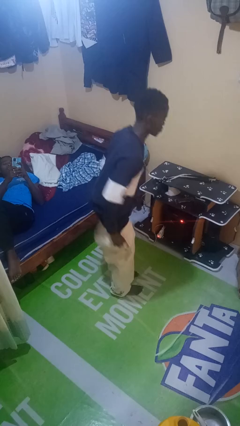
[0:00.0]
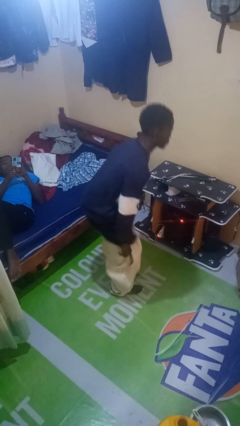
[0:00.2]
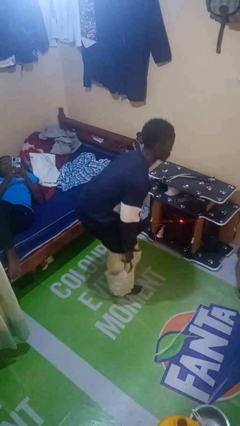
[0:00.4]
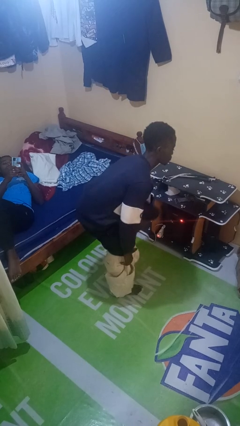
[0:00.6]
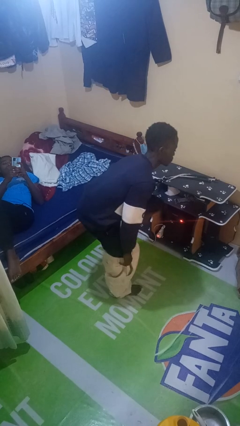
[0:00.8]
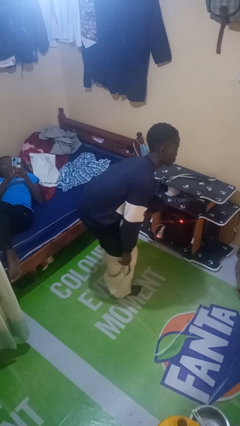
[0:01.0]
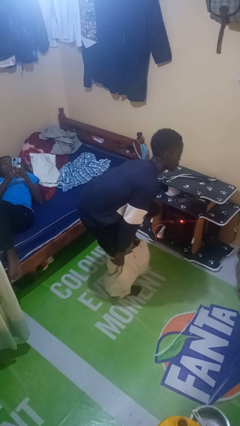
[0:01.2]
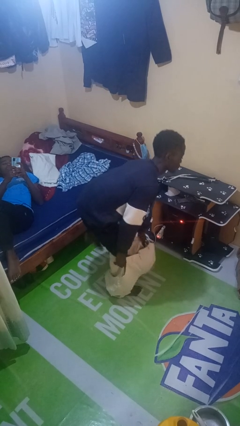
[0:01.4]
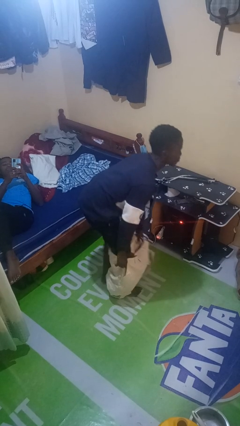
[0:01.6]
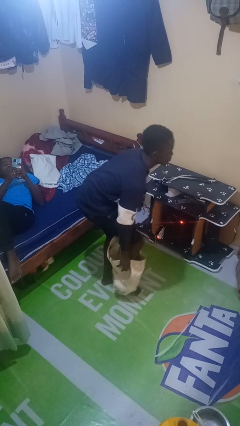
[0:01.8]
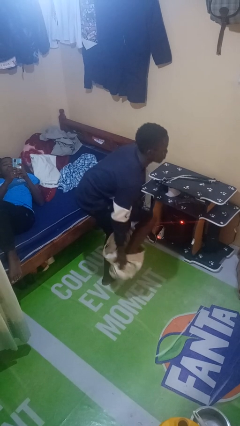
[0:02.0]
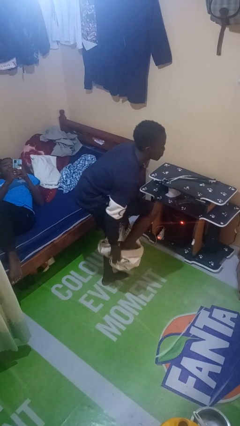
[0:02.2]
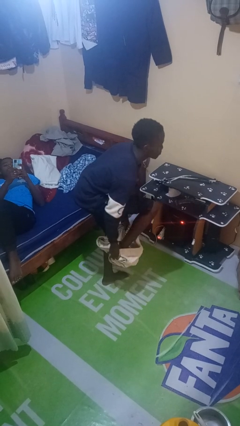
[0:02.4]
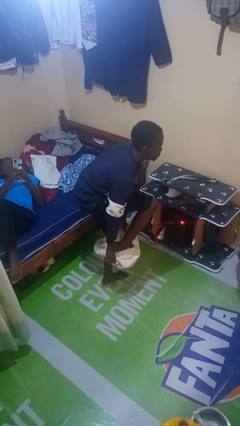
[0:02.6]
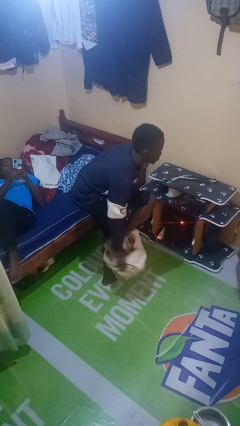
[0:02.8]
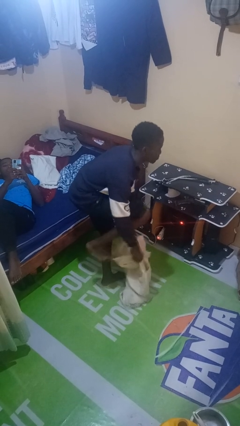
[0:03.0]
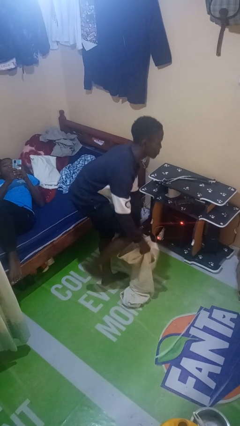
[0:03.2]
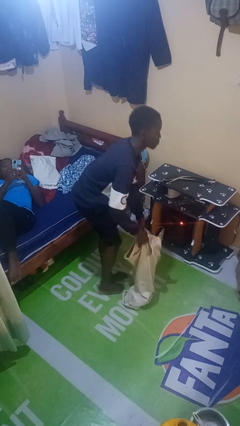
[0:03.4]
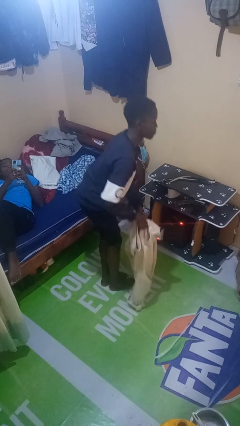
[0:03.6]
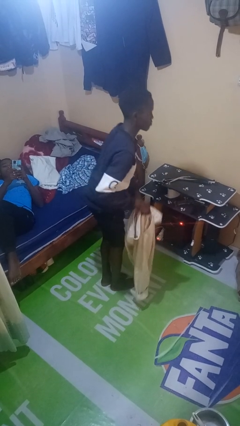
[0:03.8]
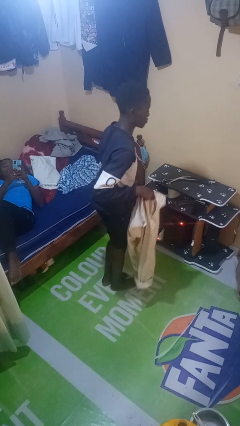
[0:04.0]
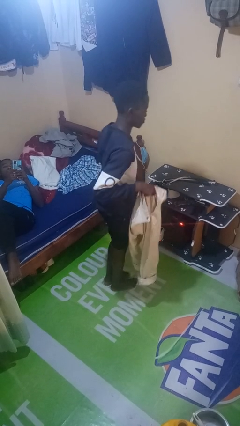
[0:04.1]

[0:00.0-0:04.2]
person takes off pants

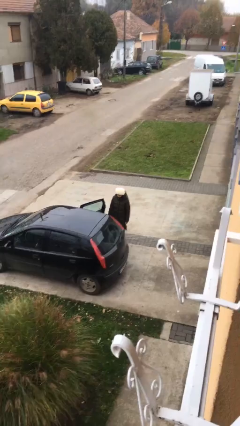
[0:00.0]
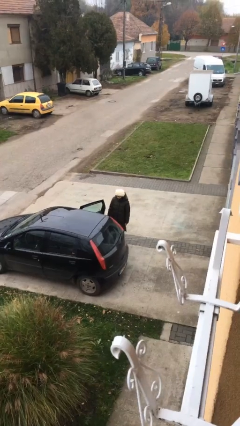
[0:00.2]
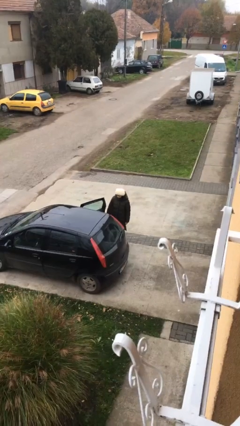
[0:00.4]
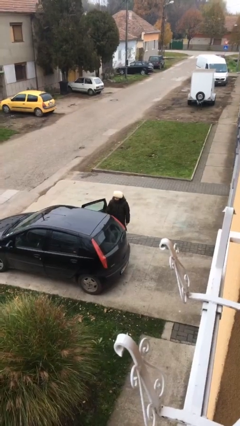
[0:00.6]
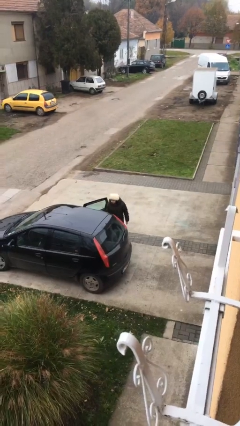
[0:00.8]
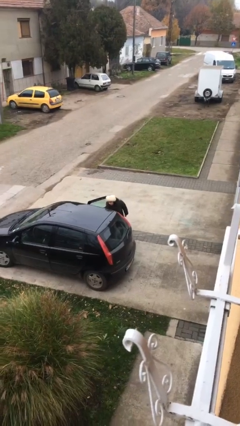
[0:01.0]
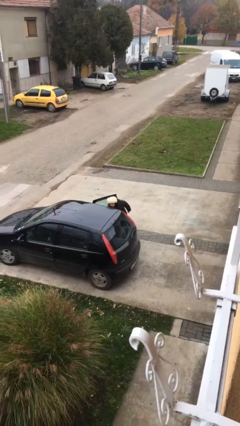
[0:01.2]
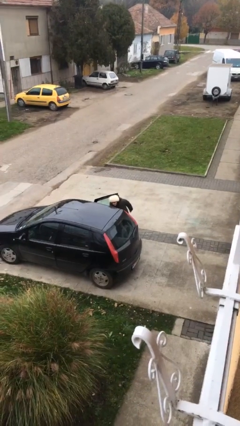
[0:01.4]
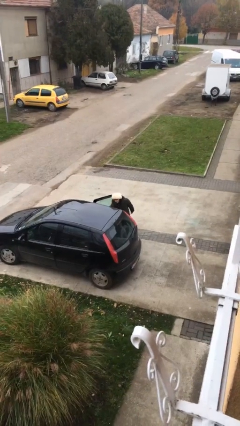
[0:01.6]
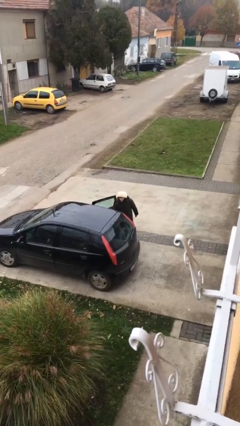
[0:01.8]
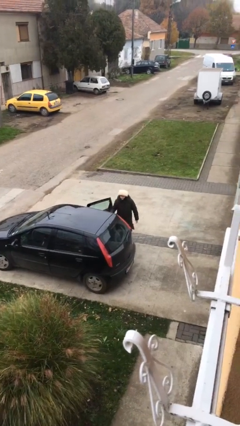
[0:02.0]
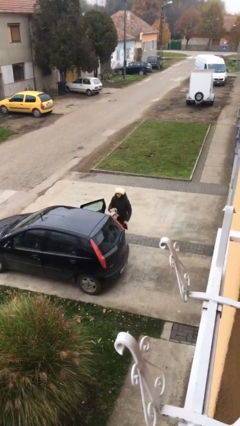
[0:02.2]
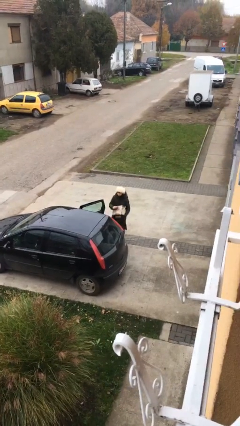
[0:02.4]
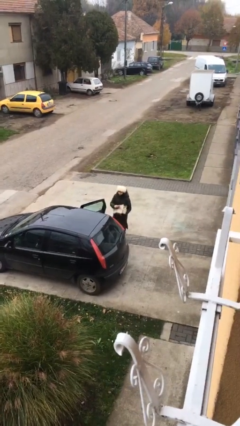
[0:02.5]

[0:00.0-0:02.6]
person unloads car

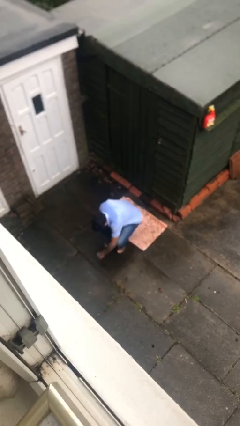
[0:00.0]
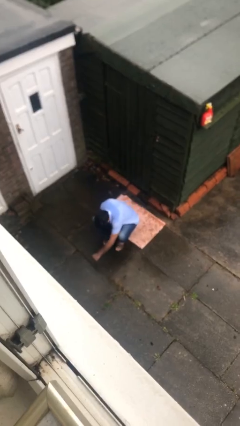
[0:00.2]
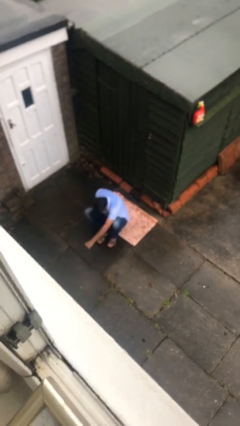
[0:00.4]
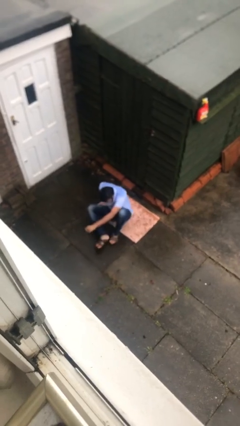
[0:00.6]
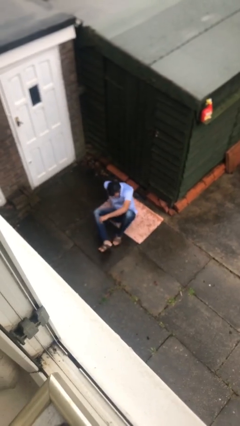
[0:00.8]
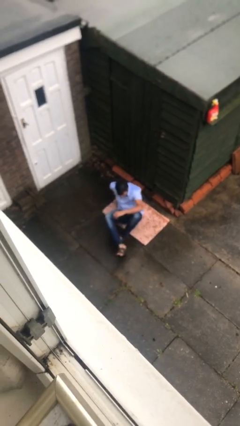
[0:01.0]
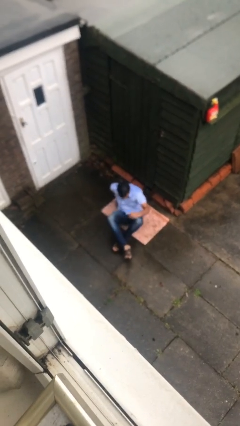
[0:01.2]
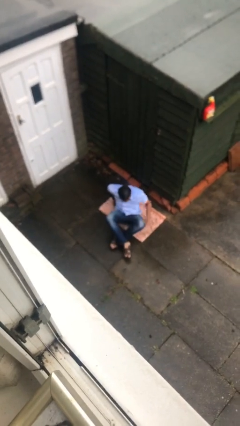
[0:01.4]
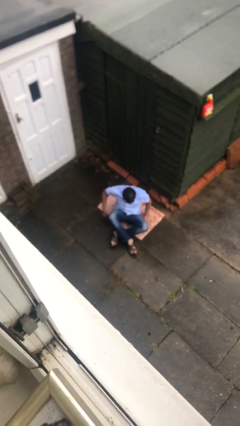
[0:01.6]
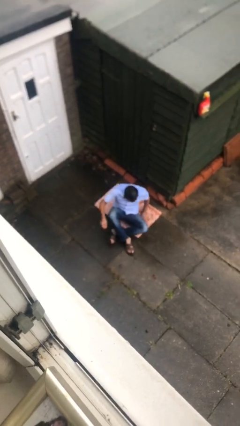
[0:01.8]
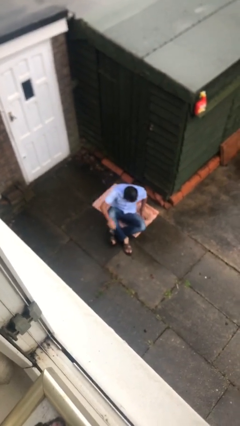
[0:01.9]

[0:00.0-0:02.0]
person sits down

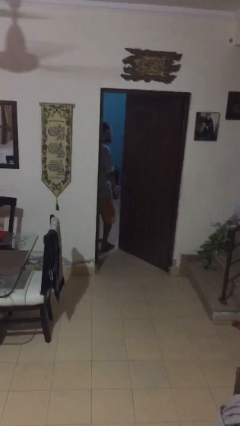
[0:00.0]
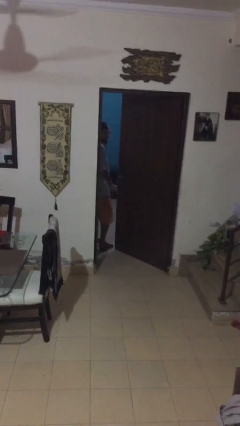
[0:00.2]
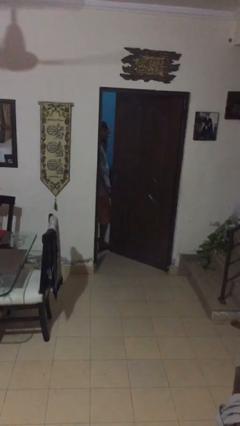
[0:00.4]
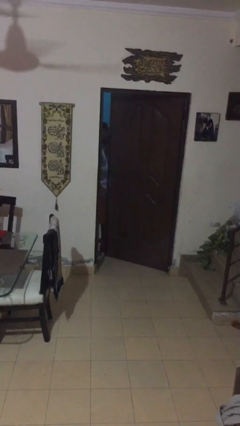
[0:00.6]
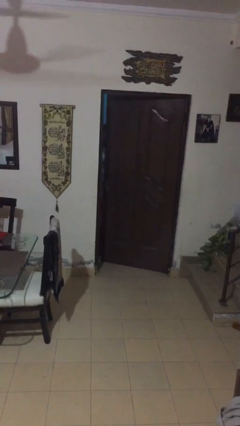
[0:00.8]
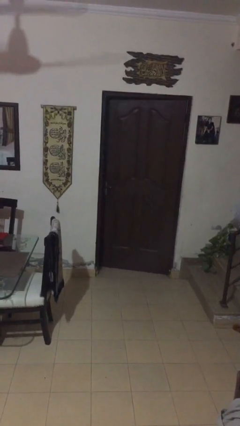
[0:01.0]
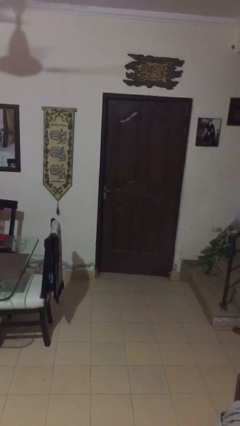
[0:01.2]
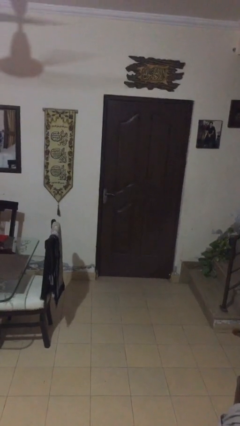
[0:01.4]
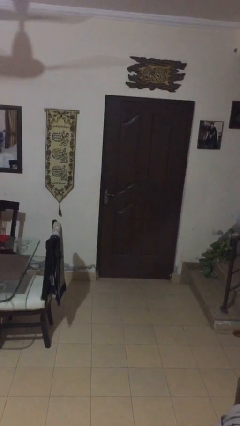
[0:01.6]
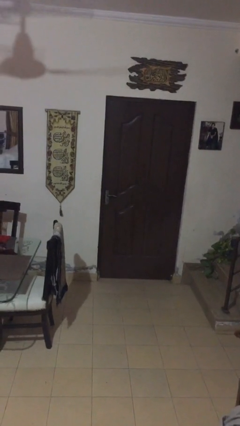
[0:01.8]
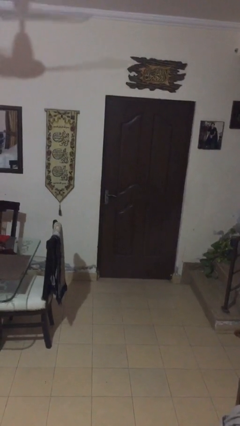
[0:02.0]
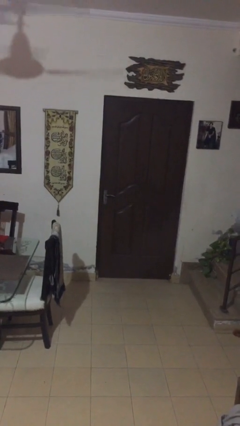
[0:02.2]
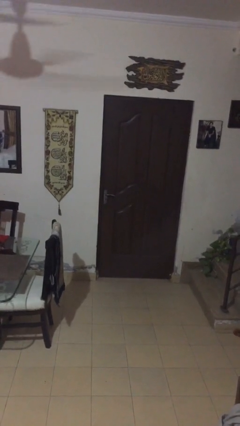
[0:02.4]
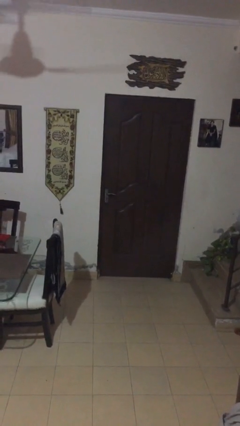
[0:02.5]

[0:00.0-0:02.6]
person closes facility door

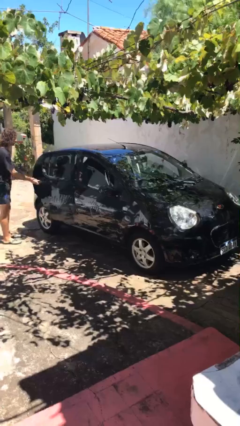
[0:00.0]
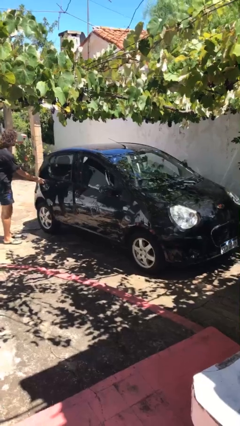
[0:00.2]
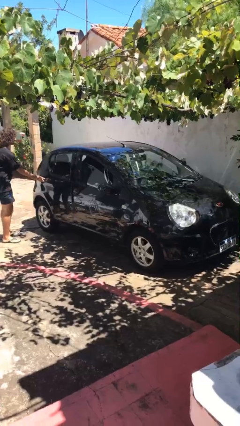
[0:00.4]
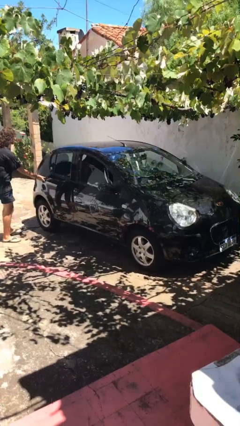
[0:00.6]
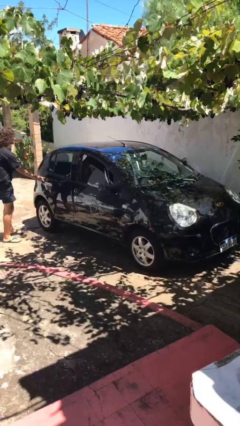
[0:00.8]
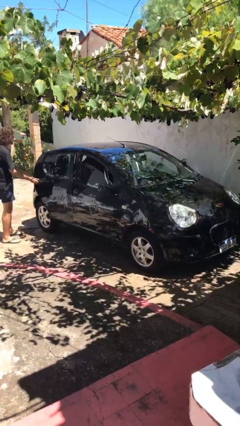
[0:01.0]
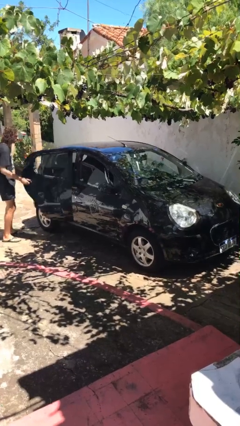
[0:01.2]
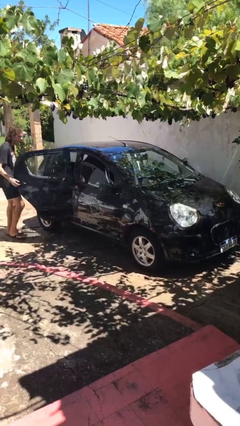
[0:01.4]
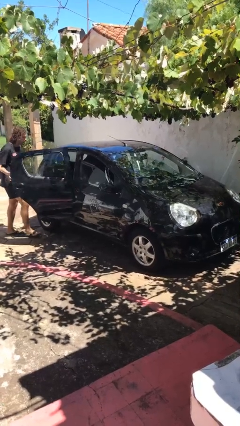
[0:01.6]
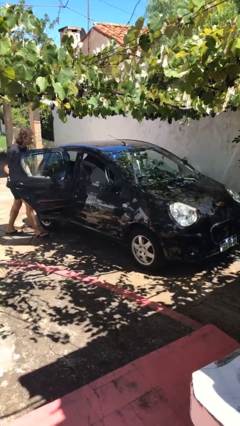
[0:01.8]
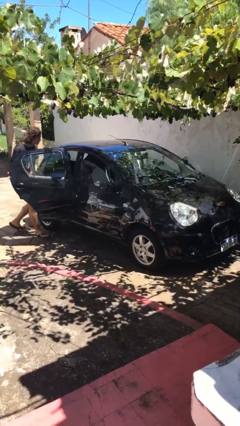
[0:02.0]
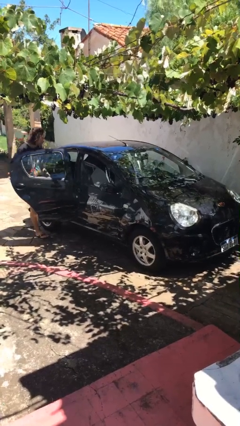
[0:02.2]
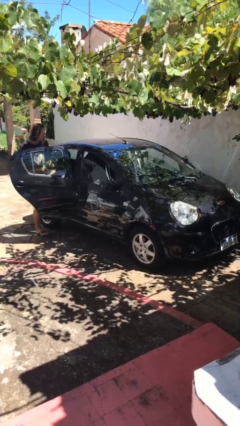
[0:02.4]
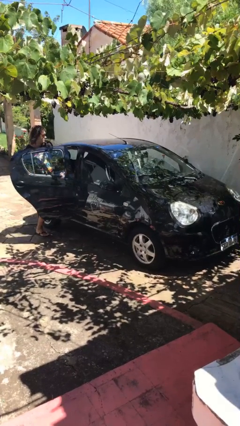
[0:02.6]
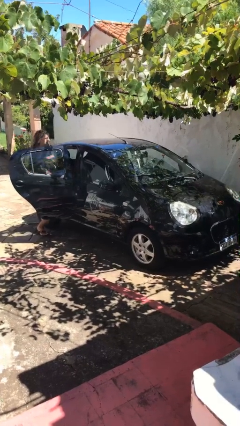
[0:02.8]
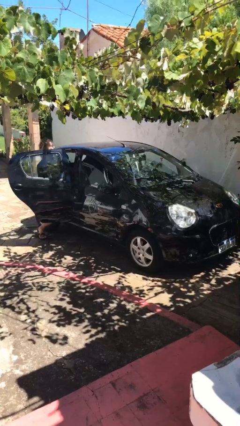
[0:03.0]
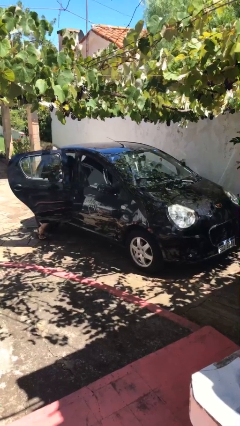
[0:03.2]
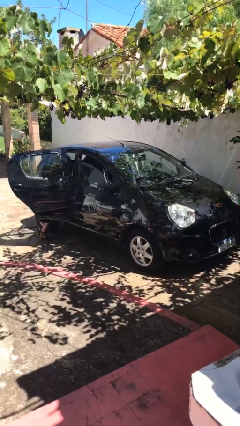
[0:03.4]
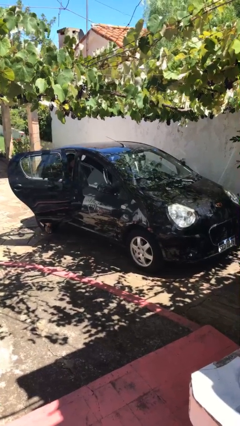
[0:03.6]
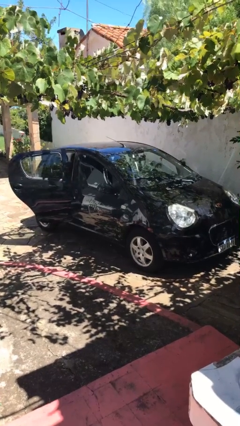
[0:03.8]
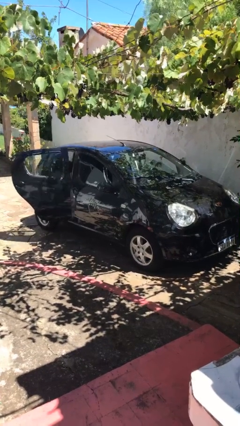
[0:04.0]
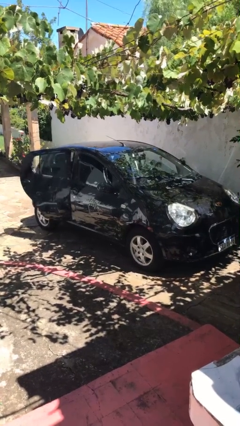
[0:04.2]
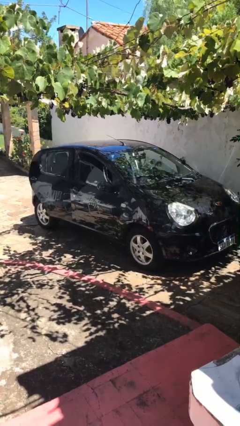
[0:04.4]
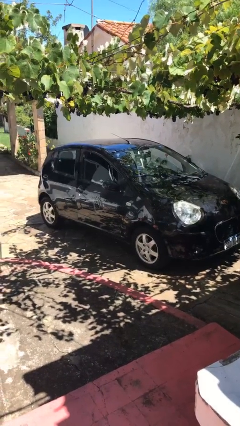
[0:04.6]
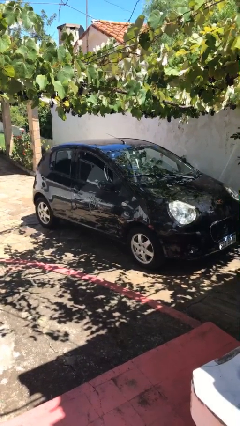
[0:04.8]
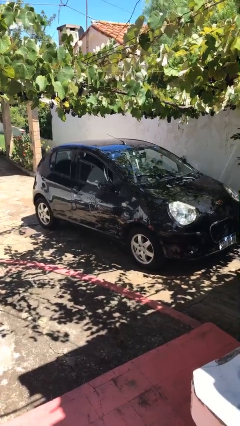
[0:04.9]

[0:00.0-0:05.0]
car picks up person

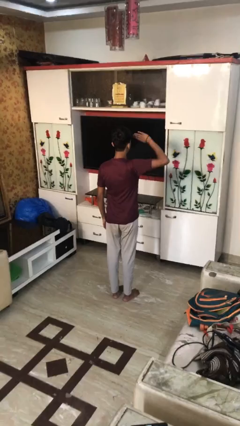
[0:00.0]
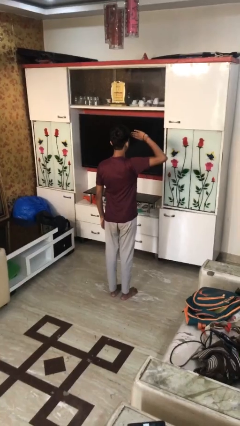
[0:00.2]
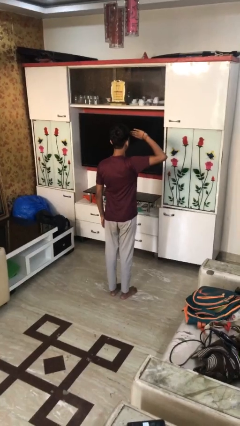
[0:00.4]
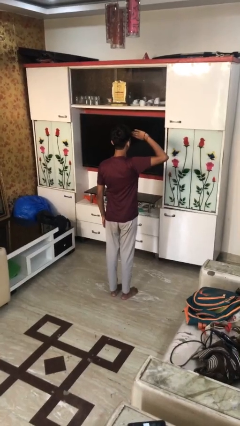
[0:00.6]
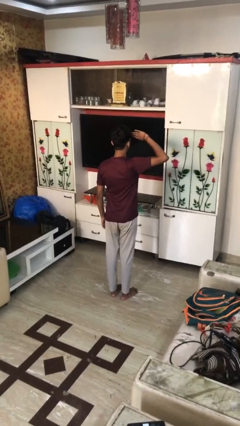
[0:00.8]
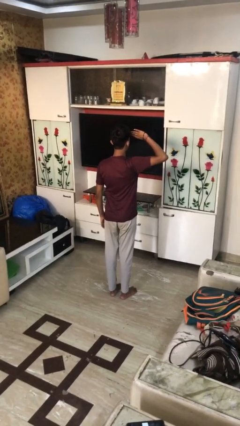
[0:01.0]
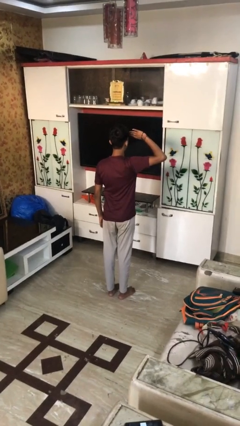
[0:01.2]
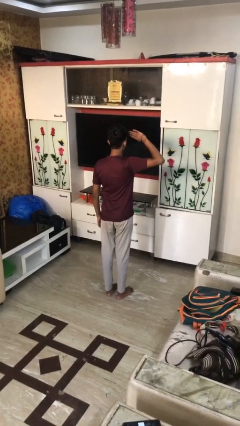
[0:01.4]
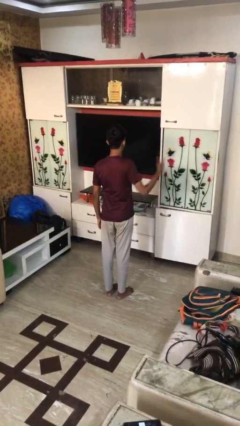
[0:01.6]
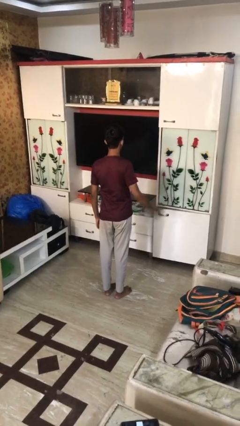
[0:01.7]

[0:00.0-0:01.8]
person salutes
